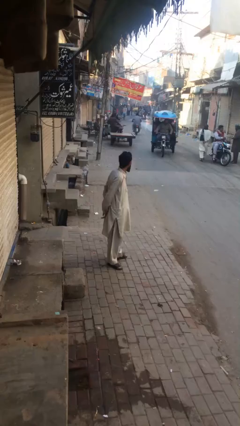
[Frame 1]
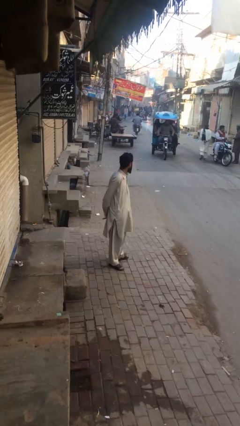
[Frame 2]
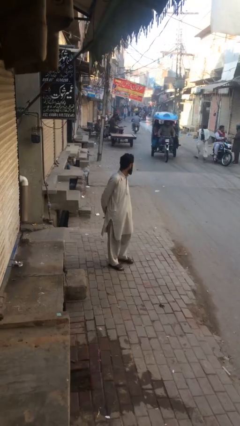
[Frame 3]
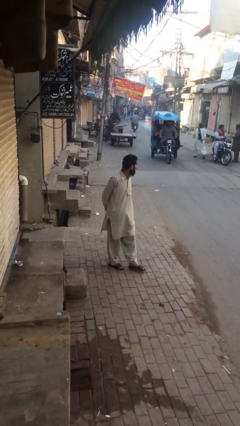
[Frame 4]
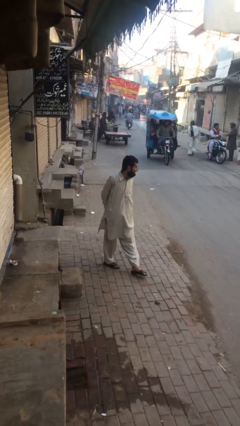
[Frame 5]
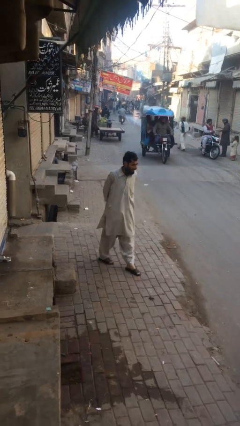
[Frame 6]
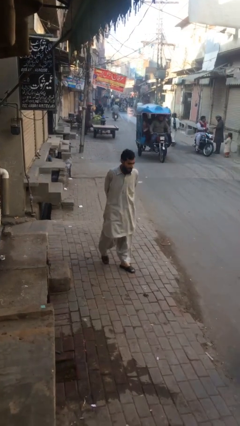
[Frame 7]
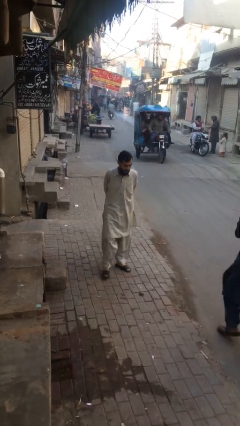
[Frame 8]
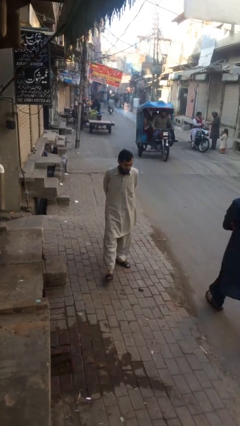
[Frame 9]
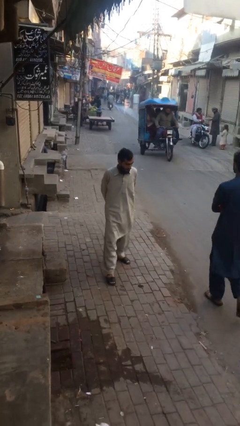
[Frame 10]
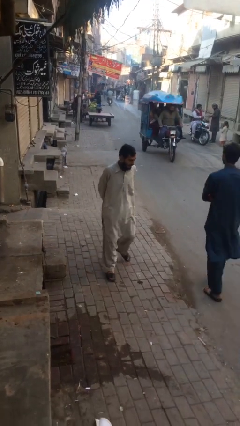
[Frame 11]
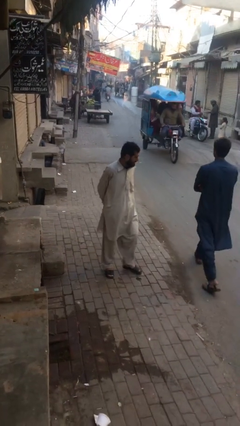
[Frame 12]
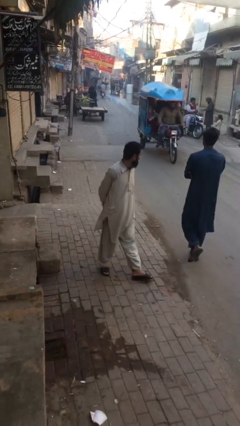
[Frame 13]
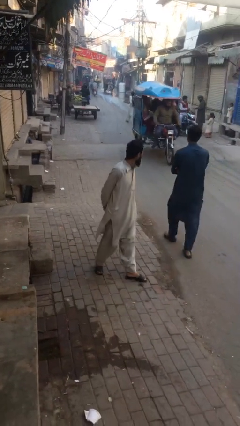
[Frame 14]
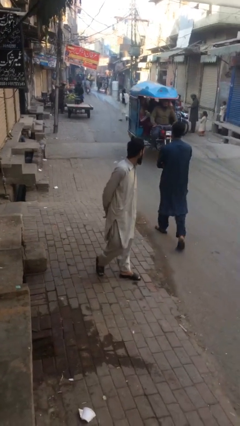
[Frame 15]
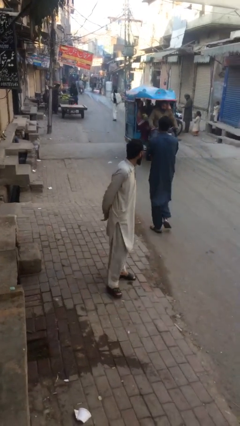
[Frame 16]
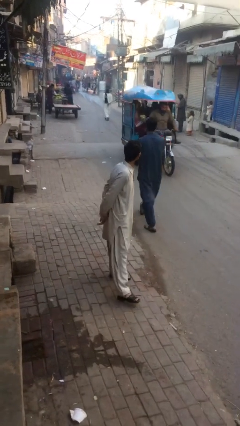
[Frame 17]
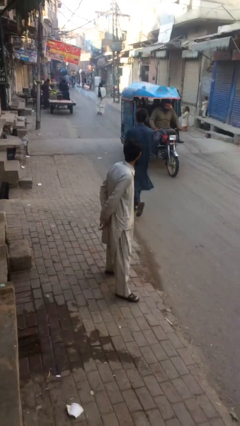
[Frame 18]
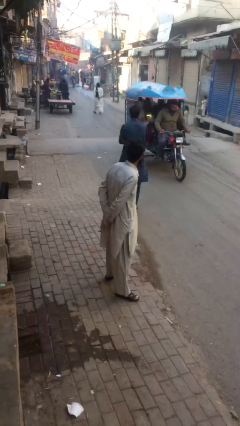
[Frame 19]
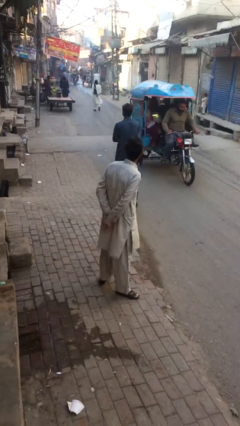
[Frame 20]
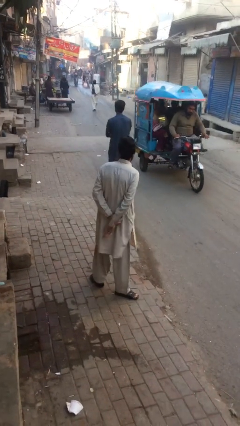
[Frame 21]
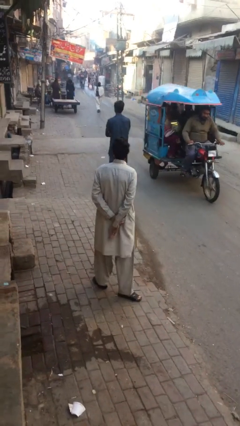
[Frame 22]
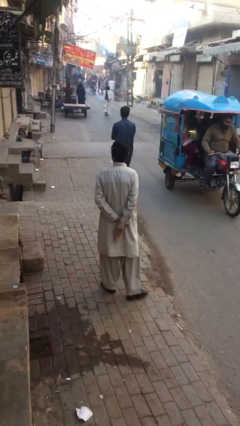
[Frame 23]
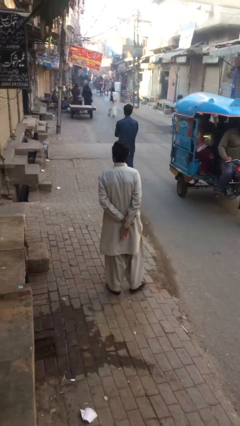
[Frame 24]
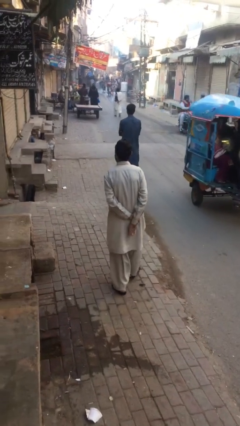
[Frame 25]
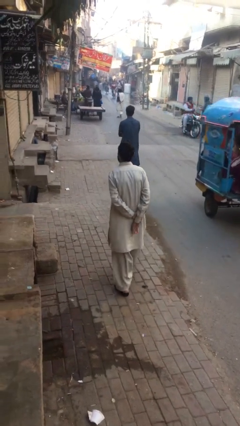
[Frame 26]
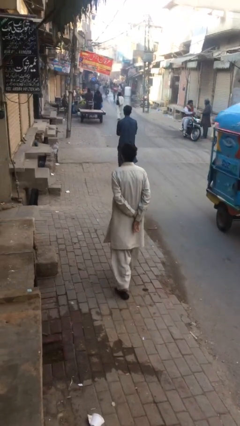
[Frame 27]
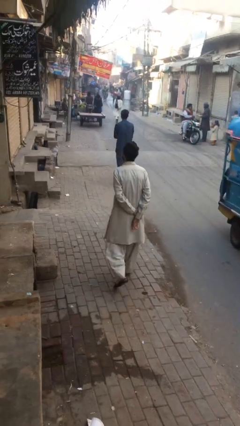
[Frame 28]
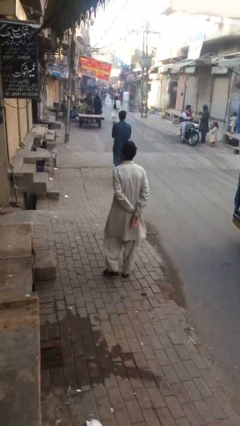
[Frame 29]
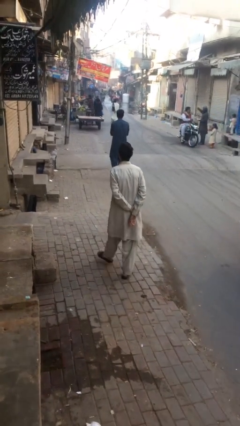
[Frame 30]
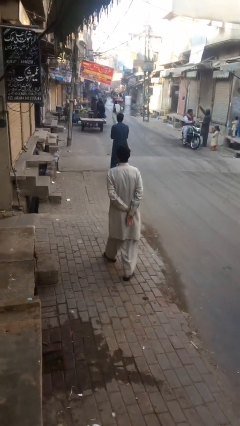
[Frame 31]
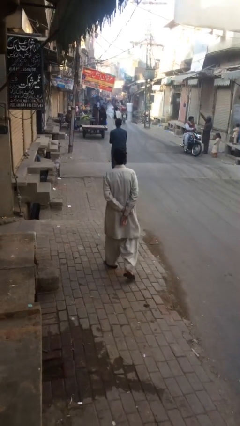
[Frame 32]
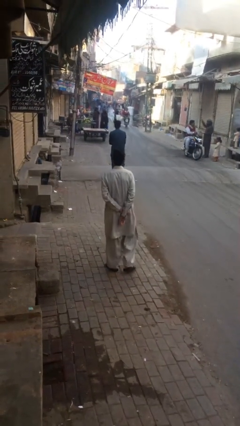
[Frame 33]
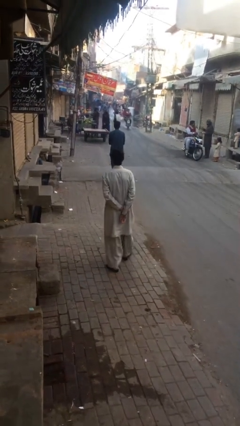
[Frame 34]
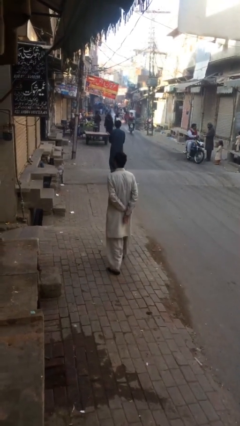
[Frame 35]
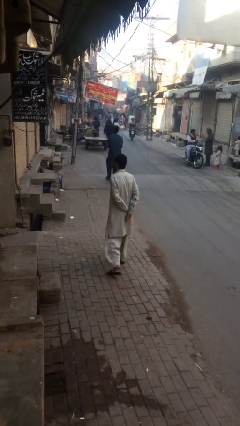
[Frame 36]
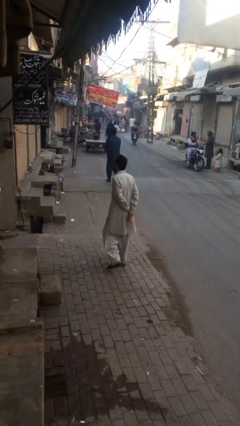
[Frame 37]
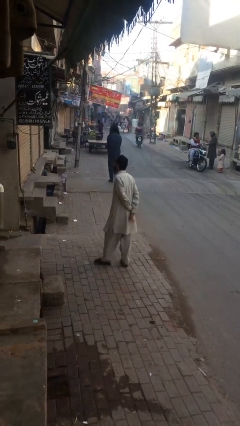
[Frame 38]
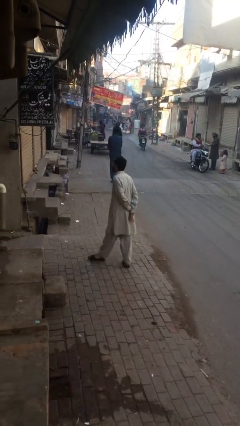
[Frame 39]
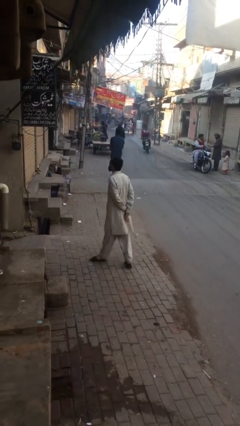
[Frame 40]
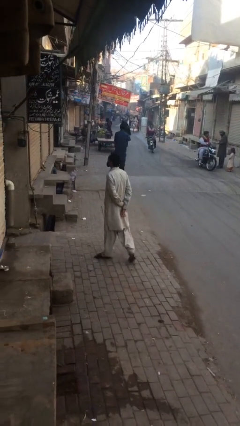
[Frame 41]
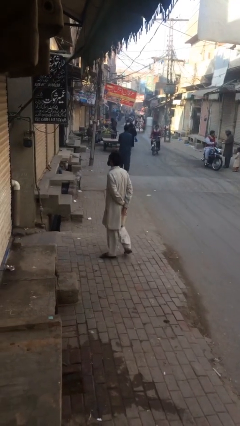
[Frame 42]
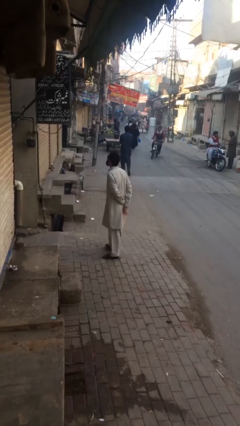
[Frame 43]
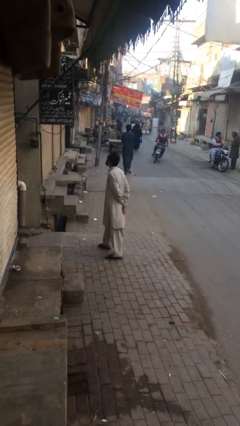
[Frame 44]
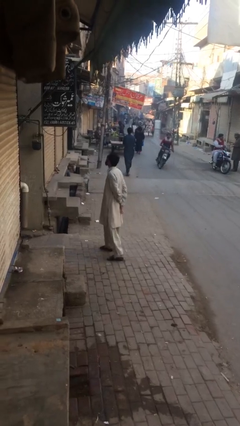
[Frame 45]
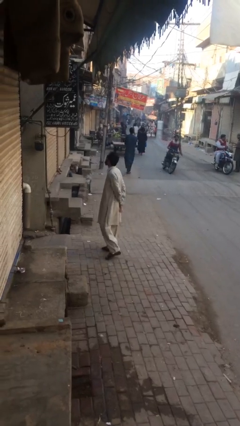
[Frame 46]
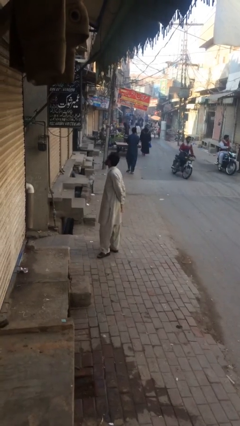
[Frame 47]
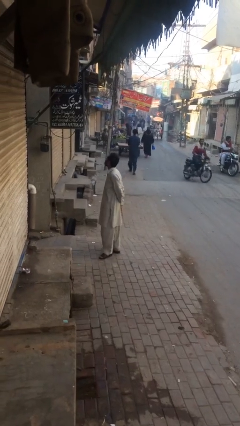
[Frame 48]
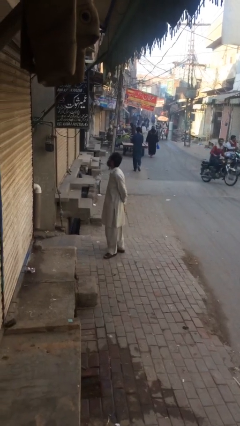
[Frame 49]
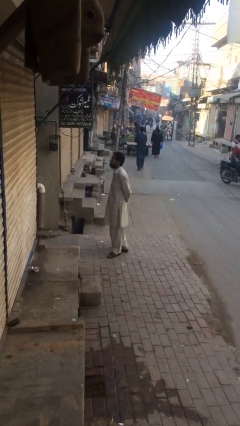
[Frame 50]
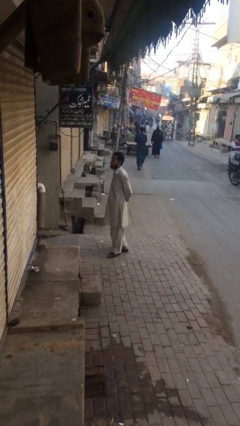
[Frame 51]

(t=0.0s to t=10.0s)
person walks

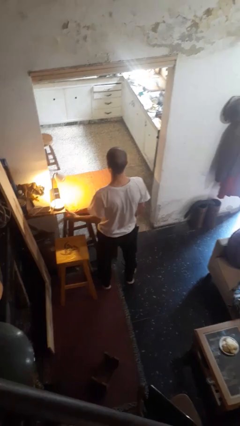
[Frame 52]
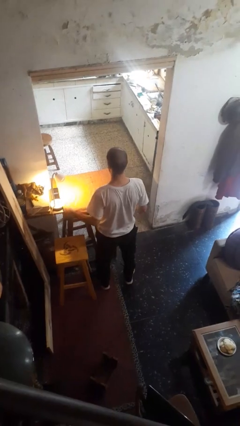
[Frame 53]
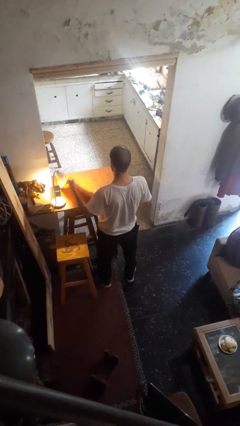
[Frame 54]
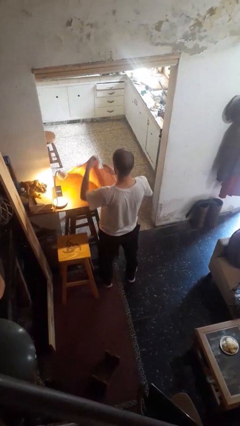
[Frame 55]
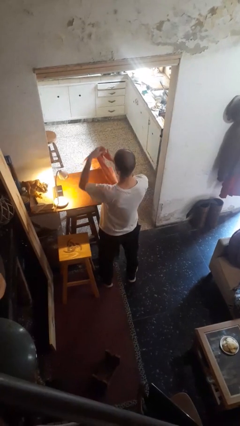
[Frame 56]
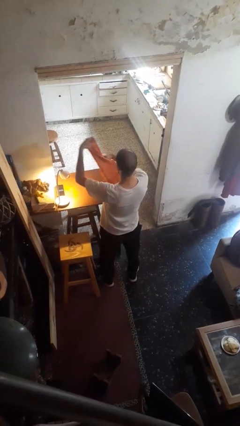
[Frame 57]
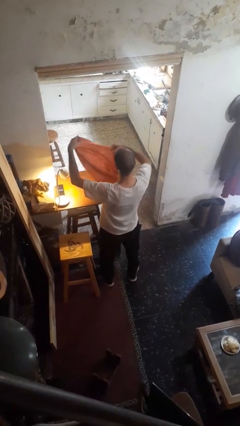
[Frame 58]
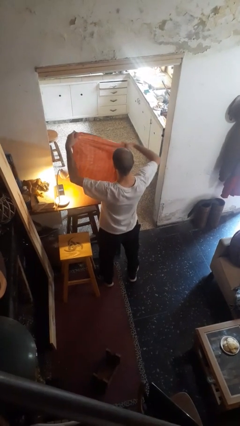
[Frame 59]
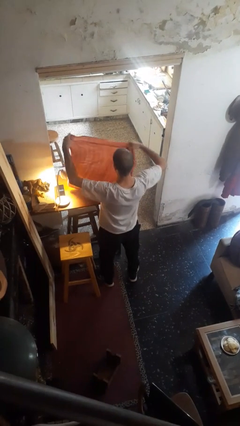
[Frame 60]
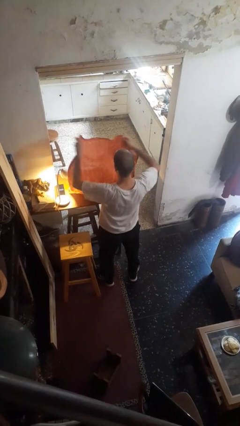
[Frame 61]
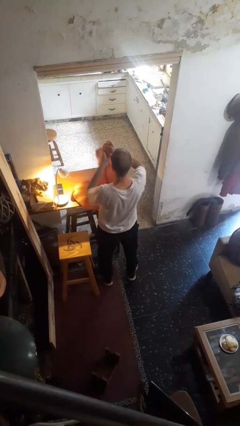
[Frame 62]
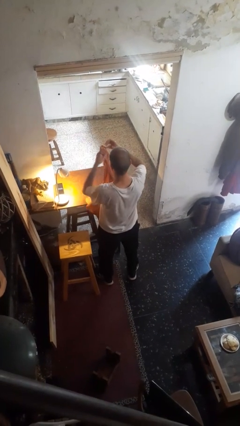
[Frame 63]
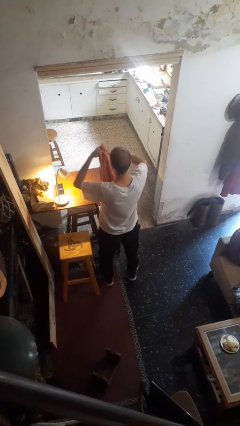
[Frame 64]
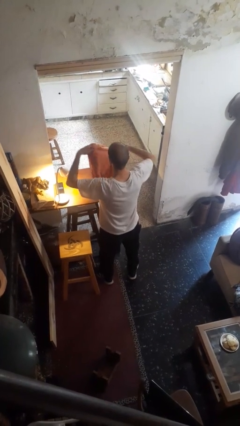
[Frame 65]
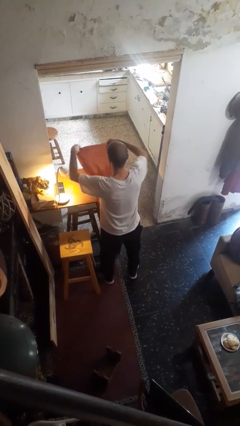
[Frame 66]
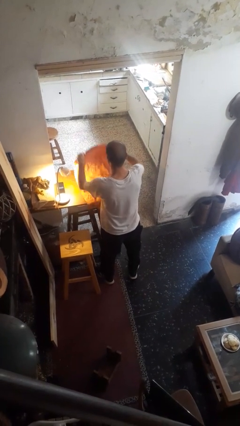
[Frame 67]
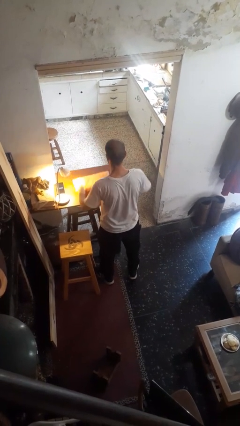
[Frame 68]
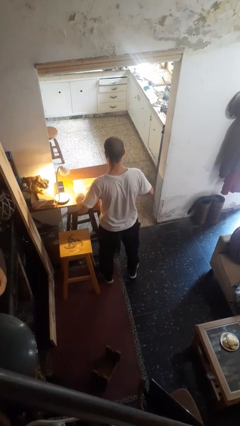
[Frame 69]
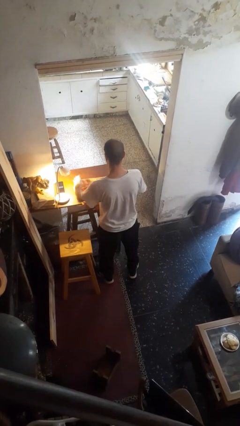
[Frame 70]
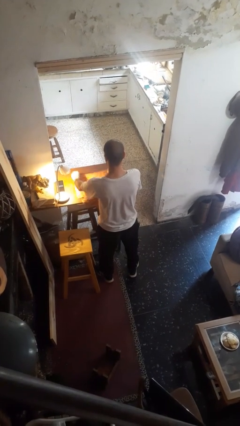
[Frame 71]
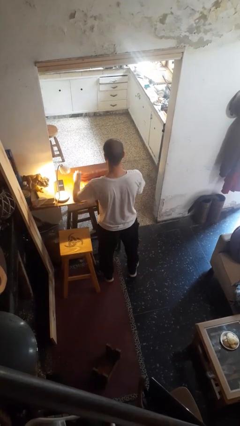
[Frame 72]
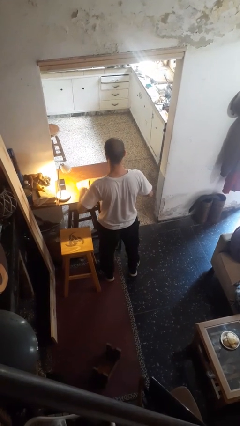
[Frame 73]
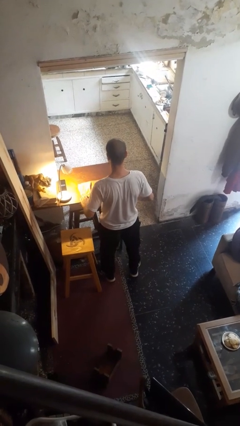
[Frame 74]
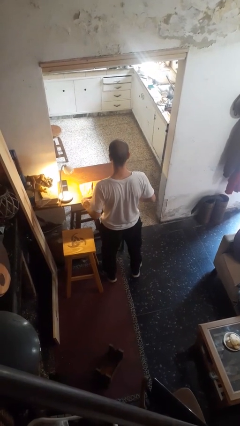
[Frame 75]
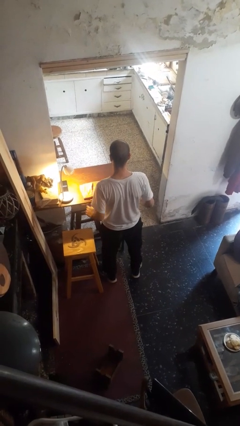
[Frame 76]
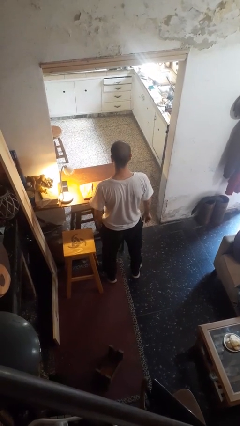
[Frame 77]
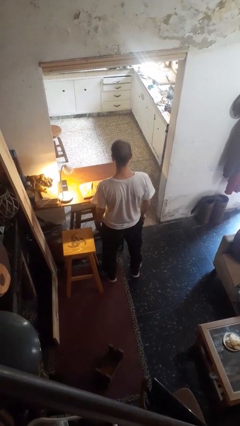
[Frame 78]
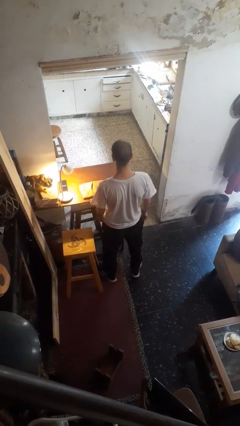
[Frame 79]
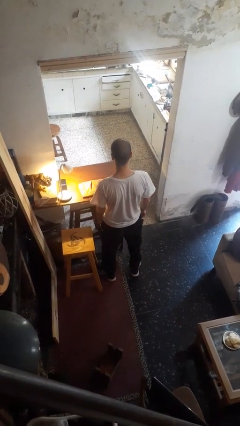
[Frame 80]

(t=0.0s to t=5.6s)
person folds tablecloth

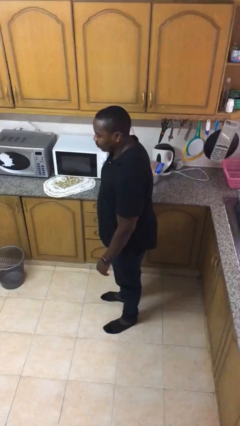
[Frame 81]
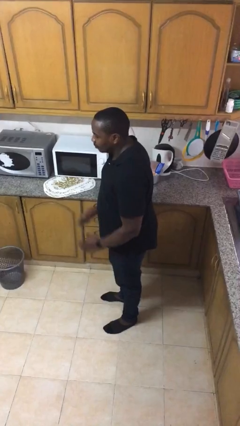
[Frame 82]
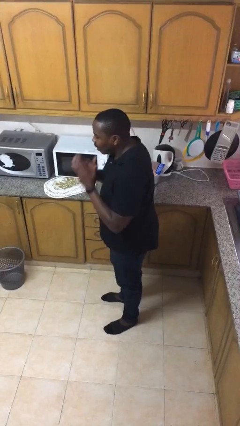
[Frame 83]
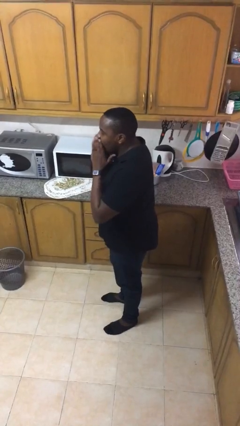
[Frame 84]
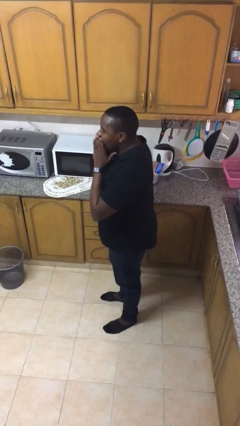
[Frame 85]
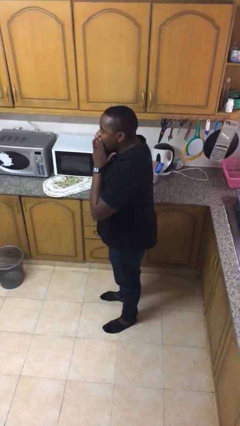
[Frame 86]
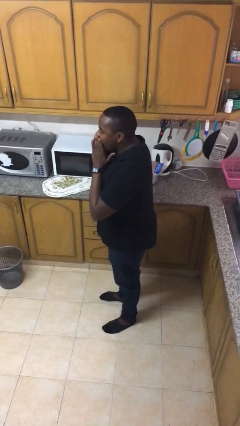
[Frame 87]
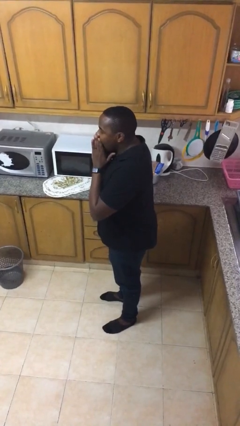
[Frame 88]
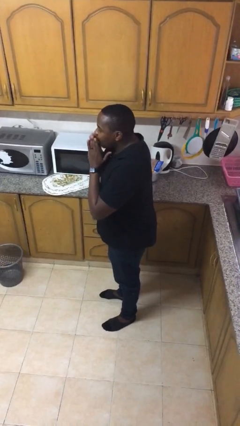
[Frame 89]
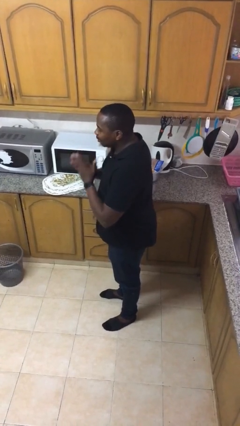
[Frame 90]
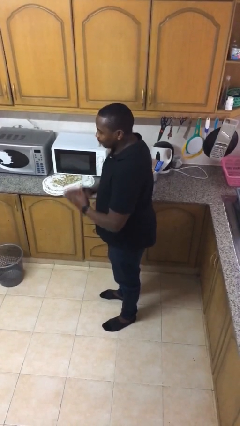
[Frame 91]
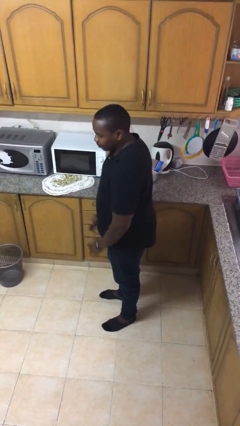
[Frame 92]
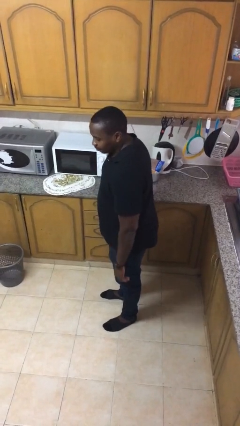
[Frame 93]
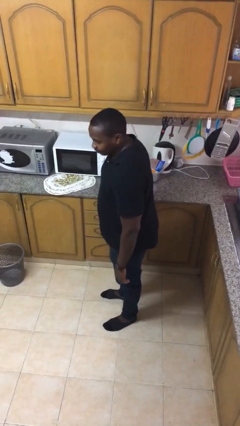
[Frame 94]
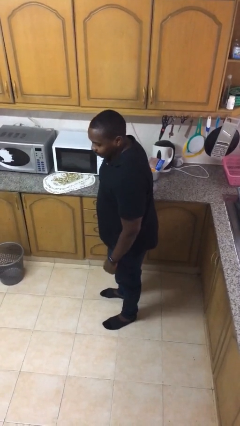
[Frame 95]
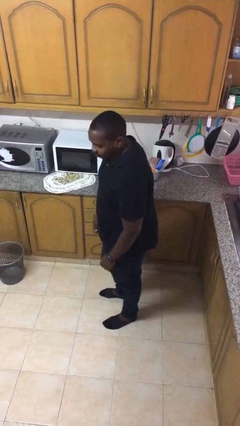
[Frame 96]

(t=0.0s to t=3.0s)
person yawns
